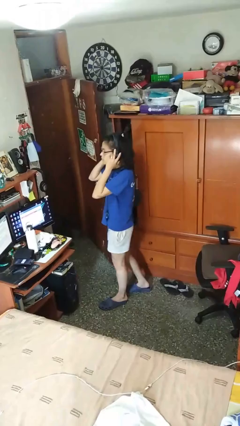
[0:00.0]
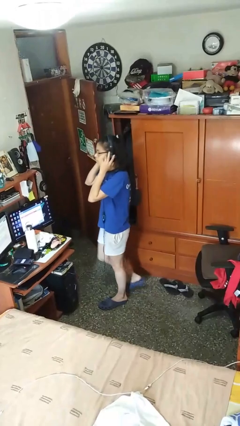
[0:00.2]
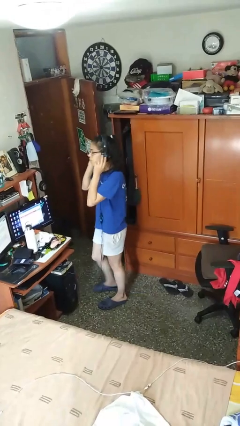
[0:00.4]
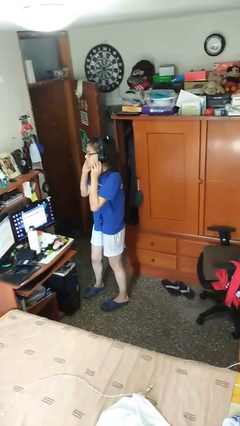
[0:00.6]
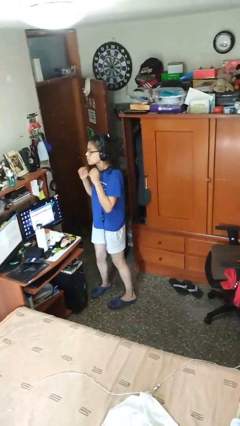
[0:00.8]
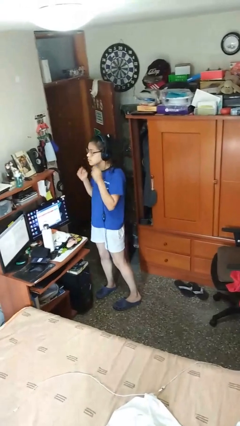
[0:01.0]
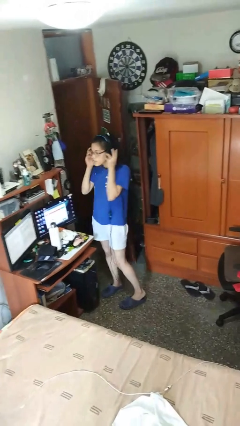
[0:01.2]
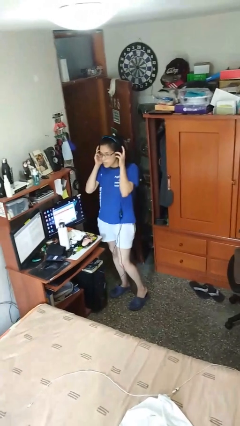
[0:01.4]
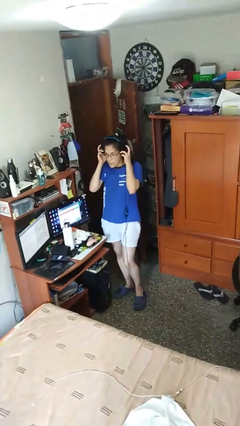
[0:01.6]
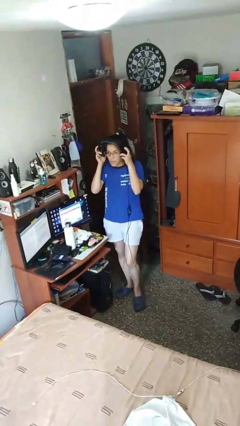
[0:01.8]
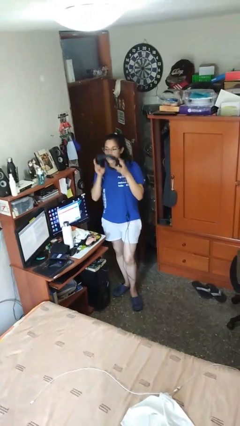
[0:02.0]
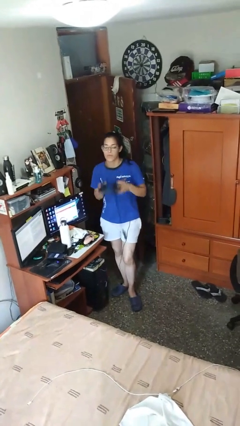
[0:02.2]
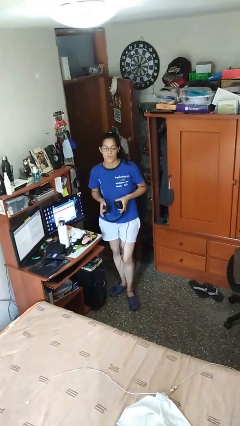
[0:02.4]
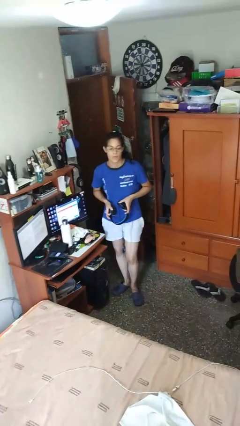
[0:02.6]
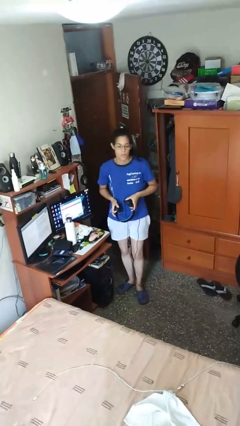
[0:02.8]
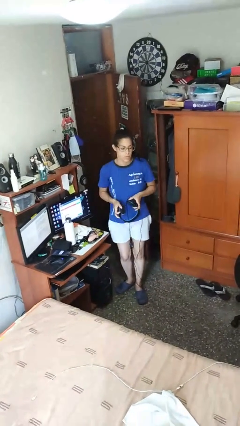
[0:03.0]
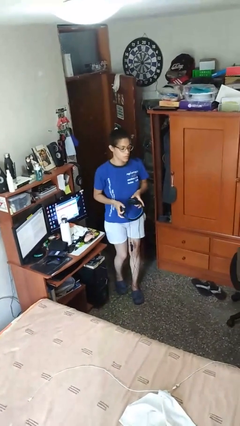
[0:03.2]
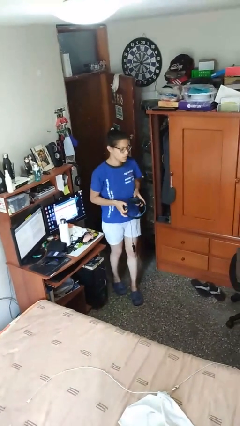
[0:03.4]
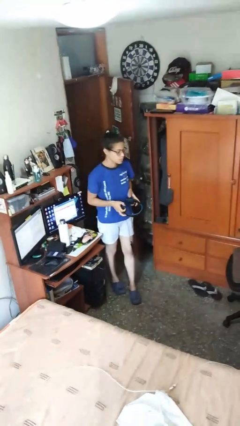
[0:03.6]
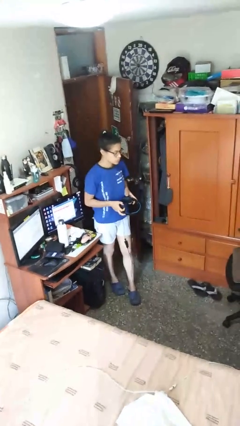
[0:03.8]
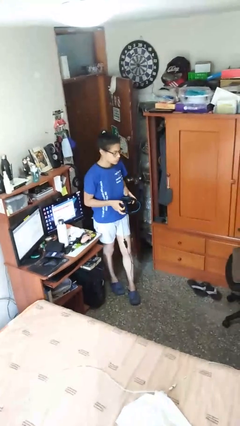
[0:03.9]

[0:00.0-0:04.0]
person takes off headphones

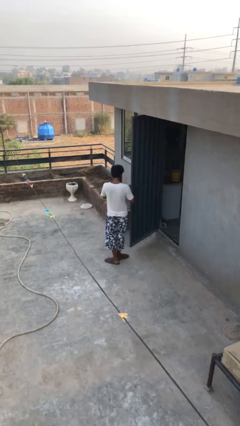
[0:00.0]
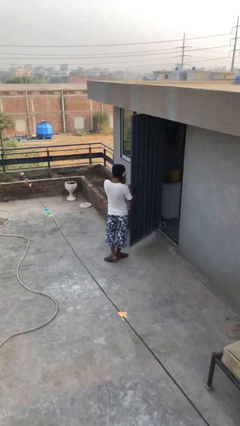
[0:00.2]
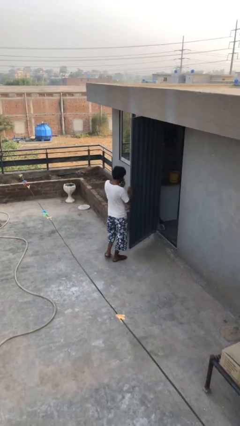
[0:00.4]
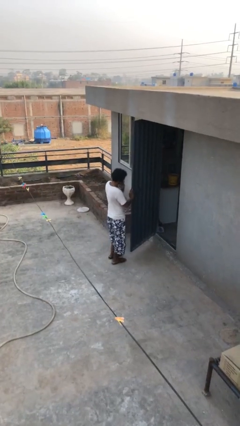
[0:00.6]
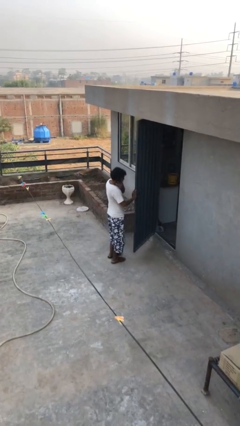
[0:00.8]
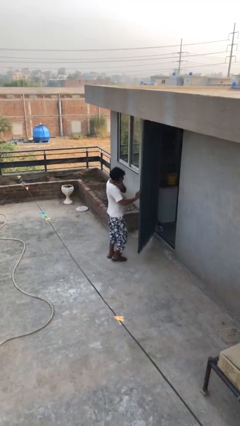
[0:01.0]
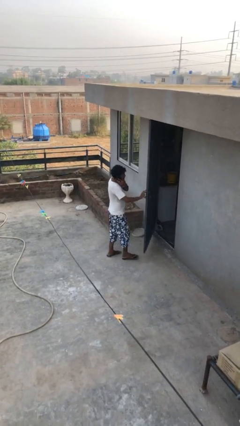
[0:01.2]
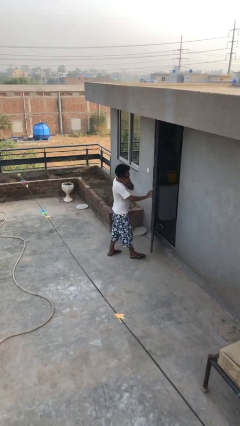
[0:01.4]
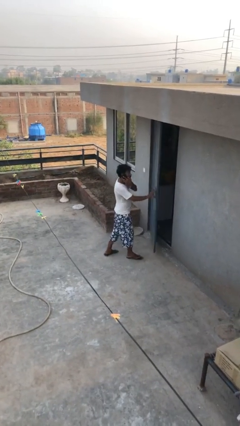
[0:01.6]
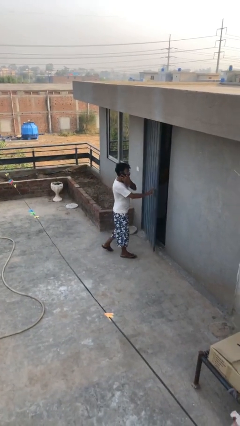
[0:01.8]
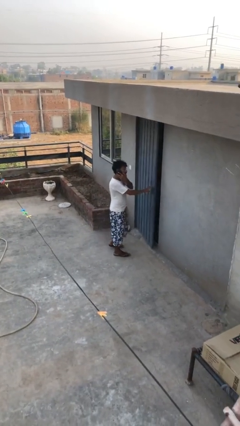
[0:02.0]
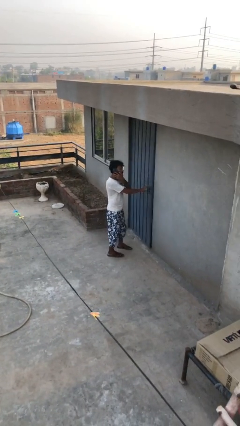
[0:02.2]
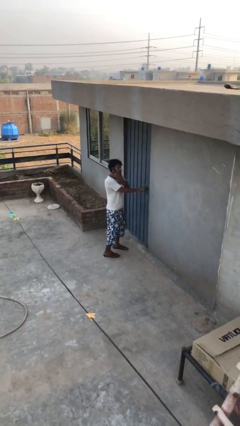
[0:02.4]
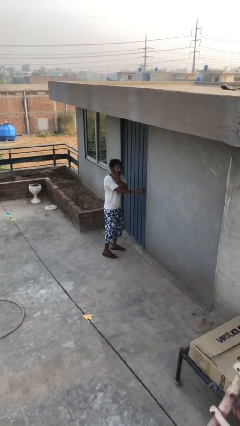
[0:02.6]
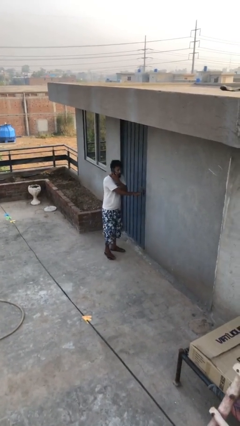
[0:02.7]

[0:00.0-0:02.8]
person closes facility door

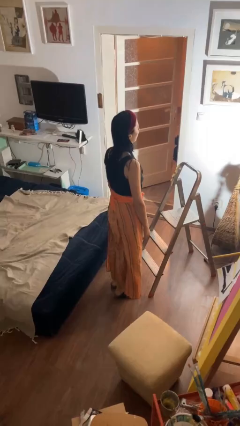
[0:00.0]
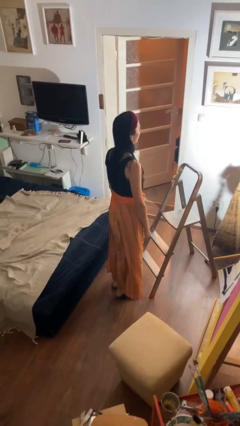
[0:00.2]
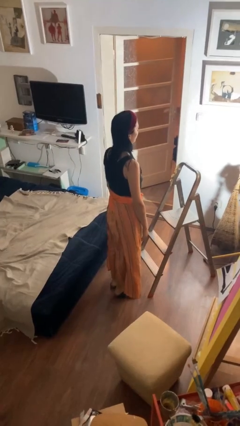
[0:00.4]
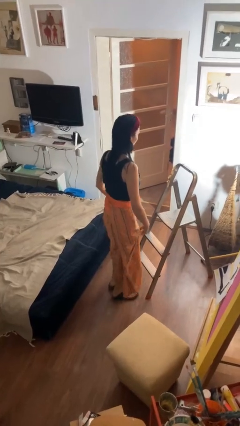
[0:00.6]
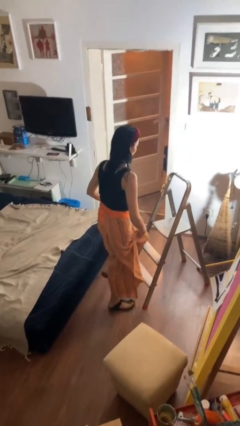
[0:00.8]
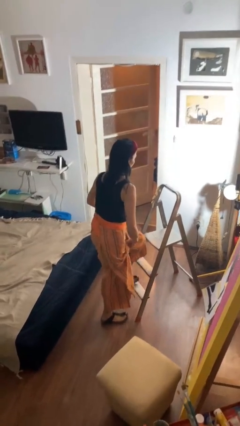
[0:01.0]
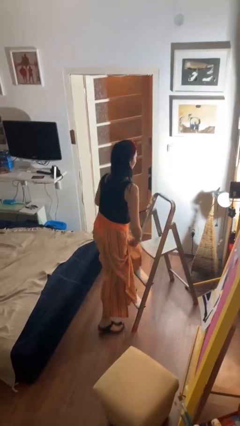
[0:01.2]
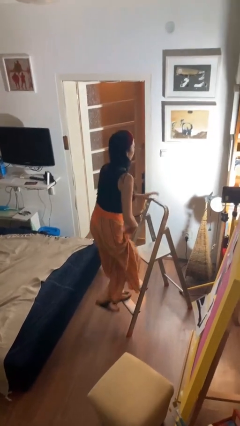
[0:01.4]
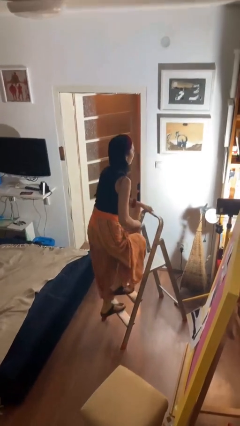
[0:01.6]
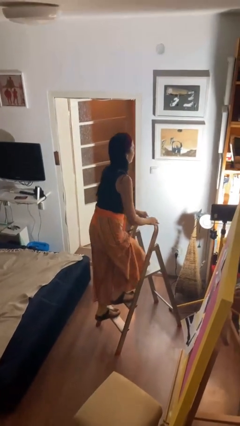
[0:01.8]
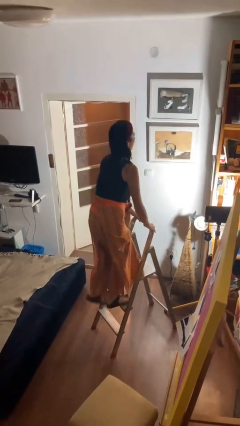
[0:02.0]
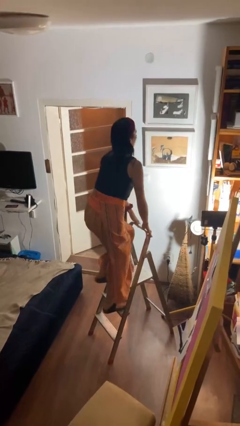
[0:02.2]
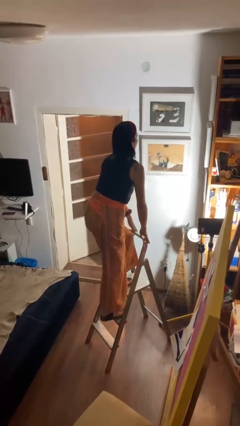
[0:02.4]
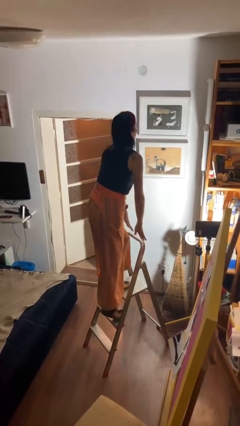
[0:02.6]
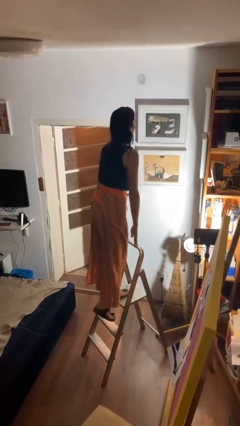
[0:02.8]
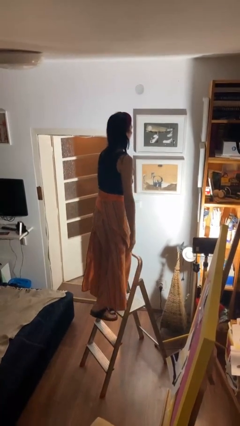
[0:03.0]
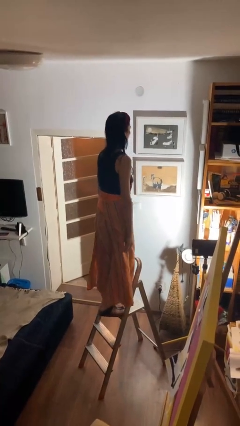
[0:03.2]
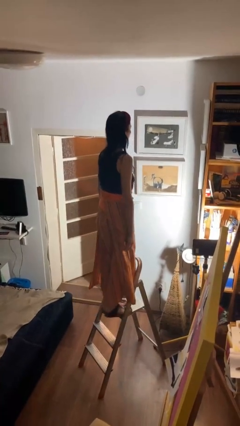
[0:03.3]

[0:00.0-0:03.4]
person climbs up ladder

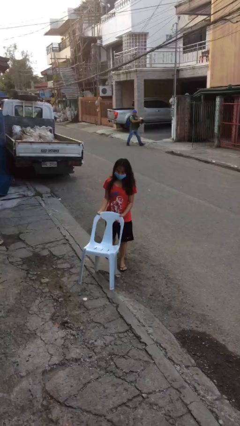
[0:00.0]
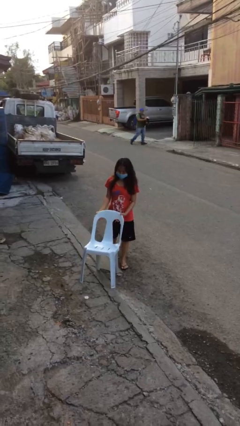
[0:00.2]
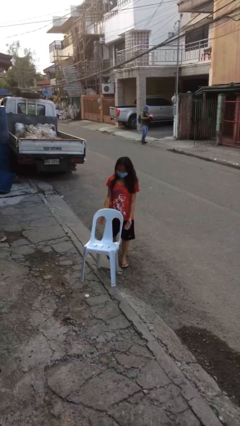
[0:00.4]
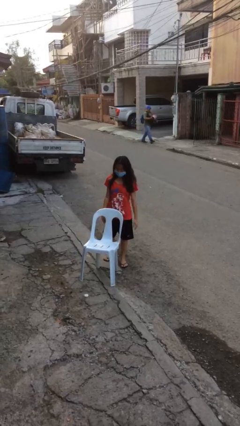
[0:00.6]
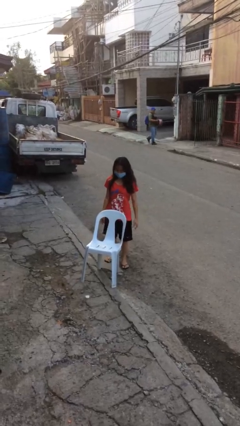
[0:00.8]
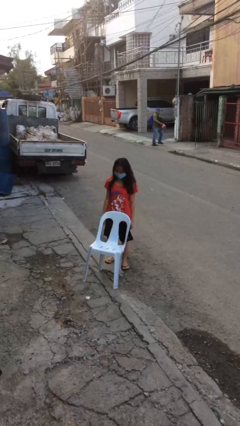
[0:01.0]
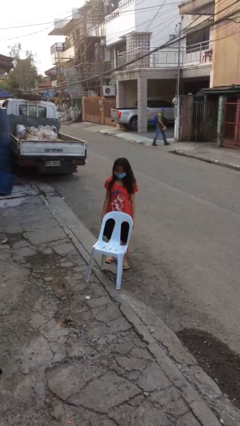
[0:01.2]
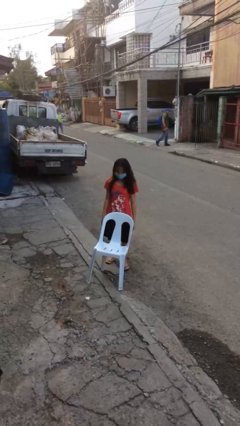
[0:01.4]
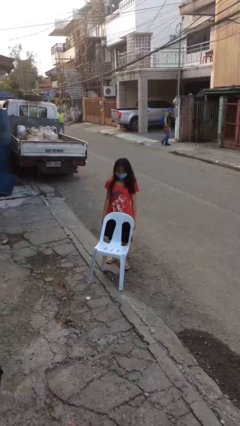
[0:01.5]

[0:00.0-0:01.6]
person puts down object on floor

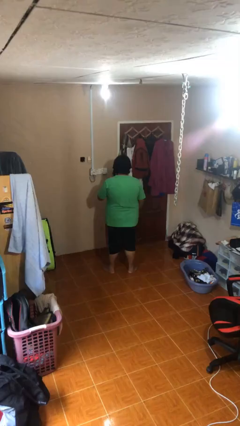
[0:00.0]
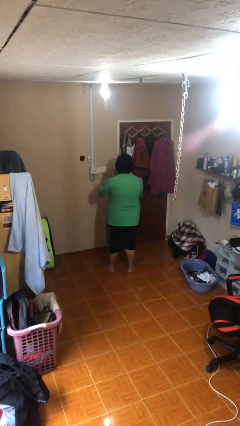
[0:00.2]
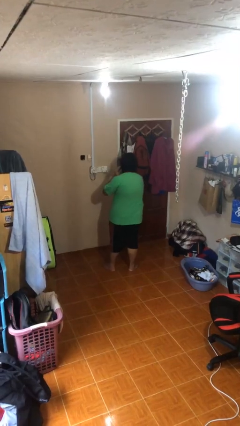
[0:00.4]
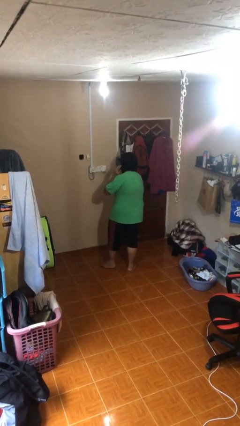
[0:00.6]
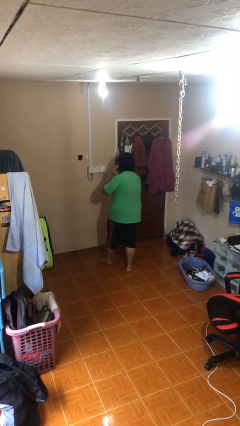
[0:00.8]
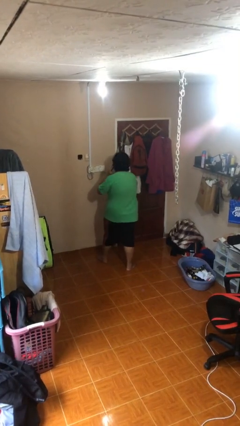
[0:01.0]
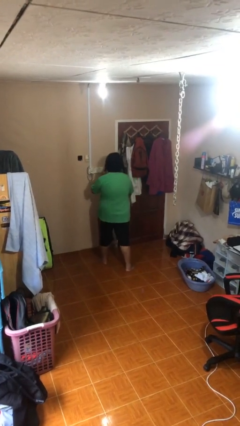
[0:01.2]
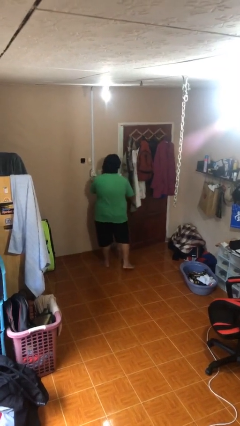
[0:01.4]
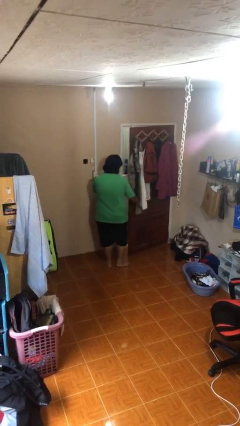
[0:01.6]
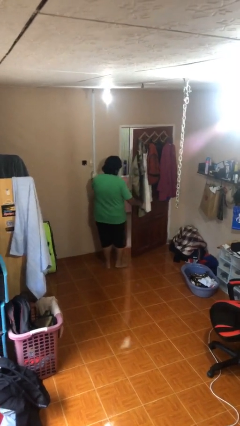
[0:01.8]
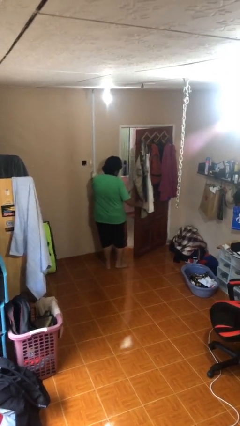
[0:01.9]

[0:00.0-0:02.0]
person opens facility door

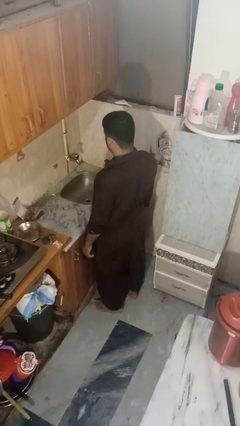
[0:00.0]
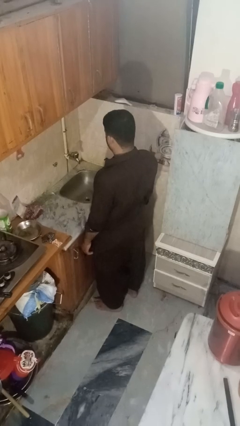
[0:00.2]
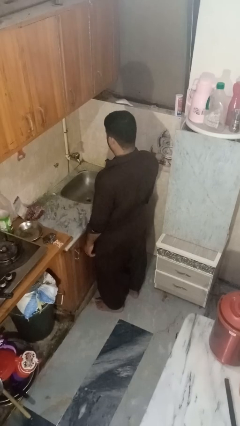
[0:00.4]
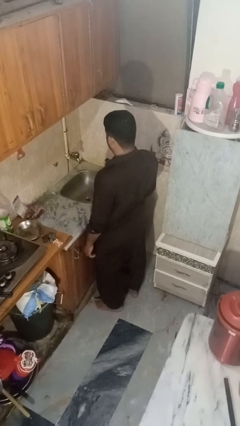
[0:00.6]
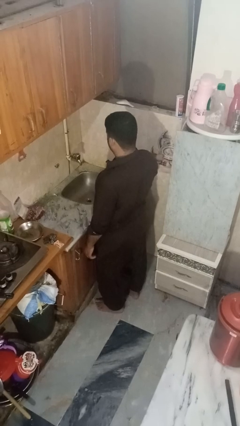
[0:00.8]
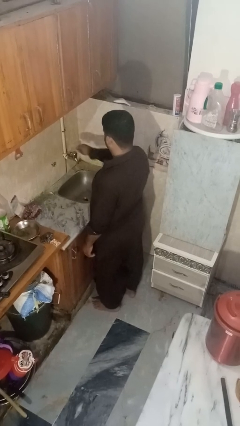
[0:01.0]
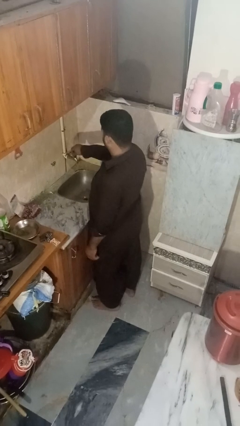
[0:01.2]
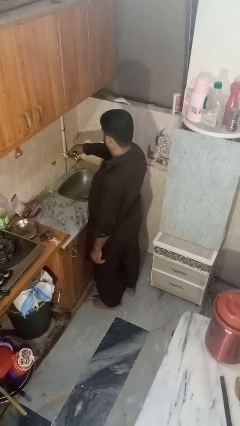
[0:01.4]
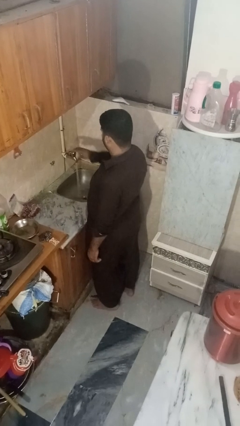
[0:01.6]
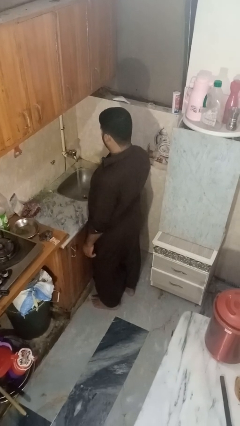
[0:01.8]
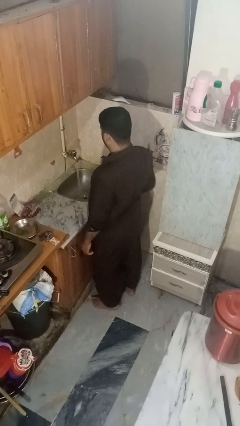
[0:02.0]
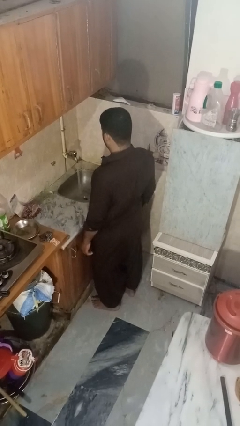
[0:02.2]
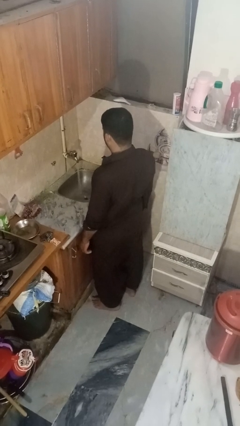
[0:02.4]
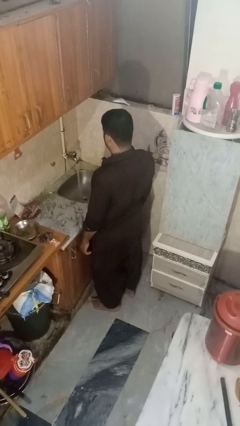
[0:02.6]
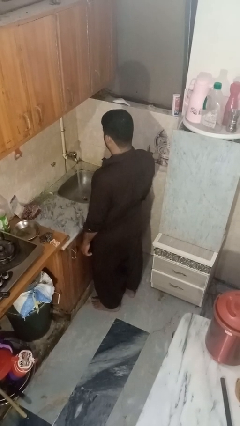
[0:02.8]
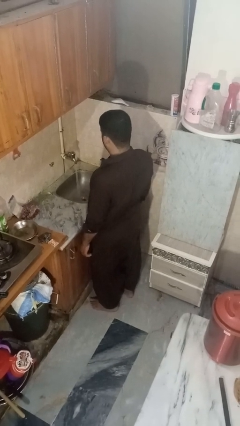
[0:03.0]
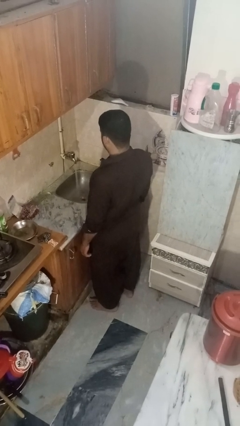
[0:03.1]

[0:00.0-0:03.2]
person turns on faucet

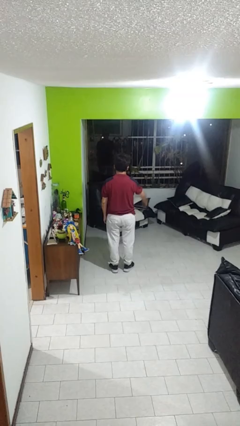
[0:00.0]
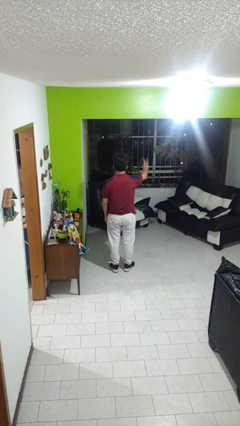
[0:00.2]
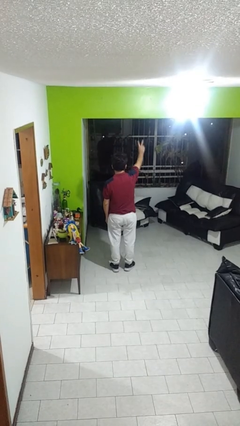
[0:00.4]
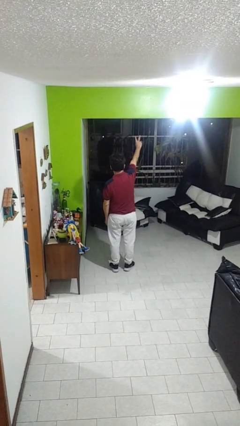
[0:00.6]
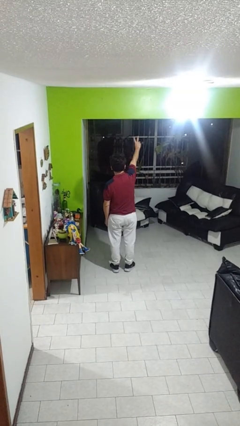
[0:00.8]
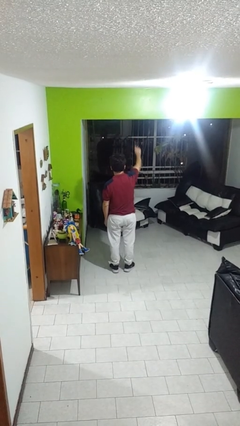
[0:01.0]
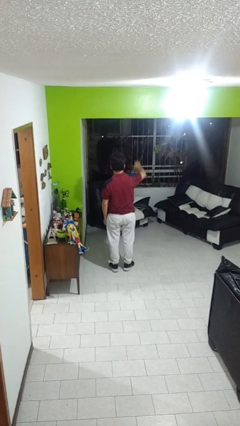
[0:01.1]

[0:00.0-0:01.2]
person gestures peace
